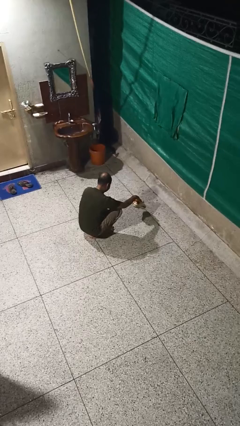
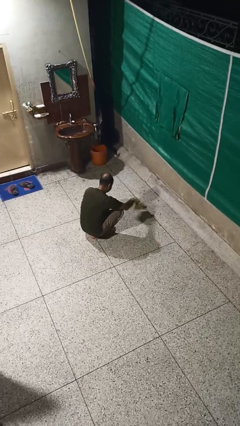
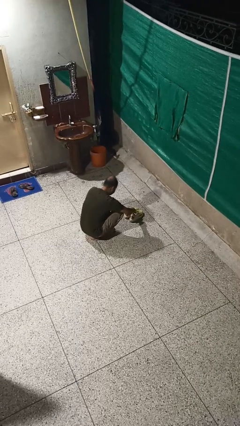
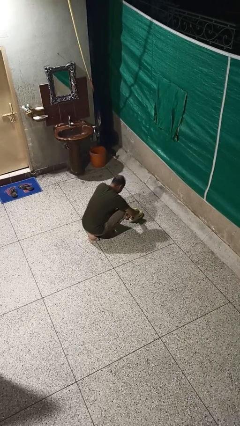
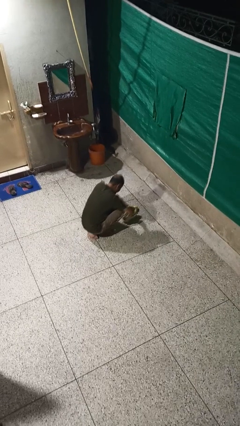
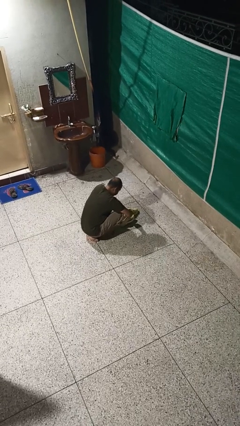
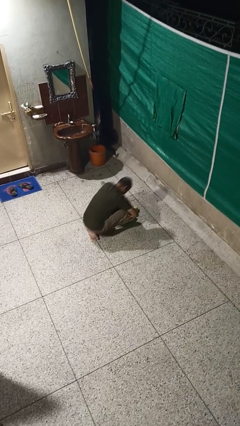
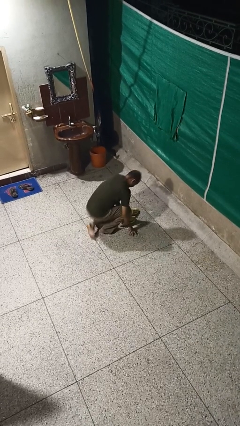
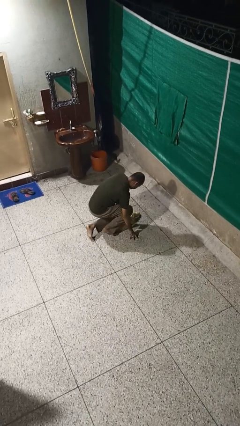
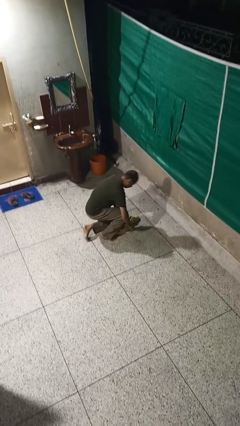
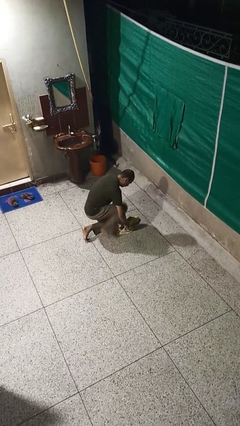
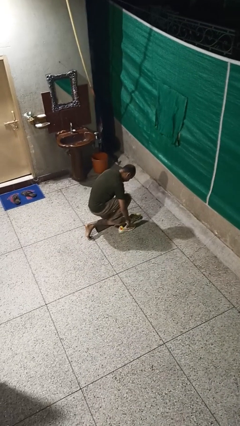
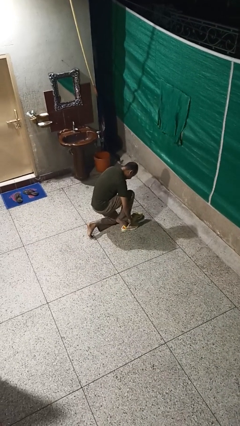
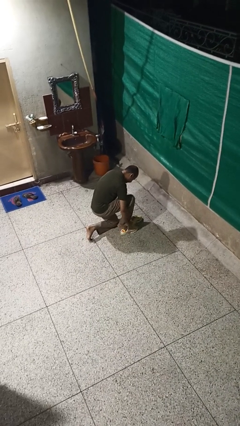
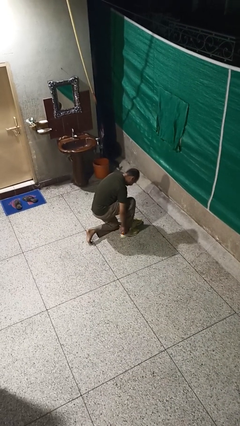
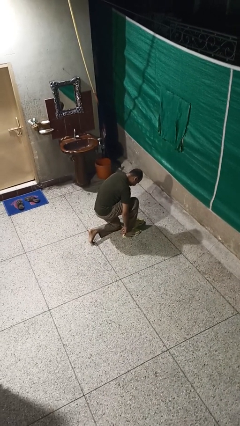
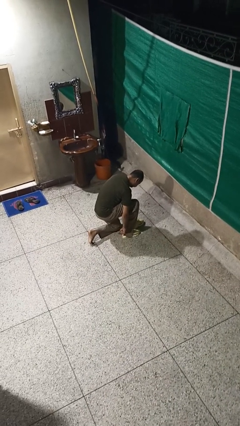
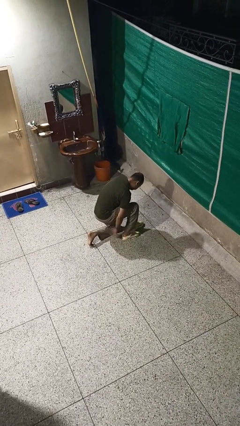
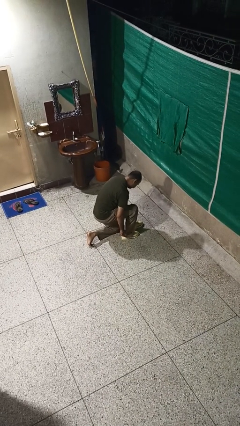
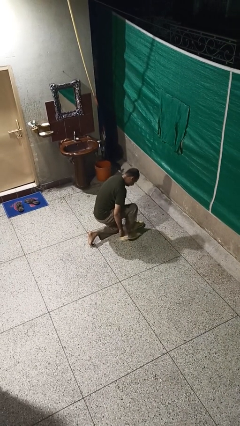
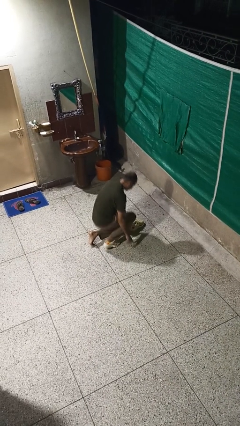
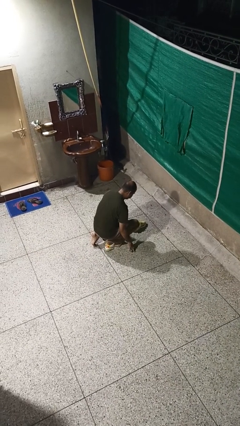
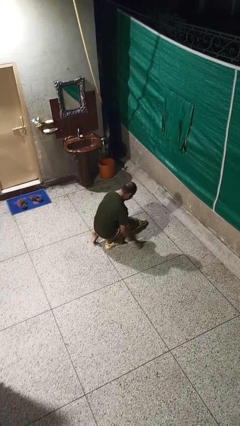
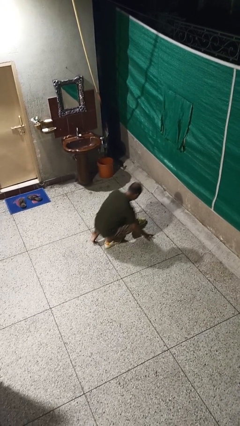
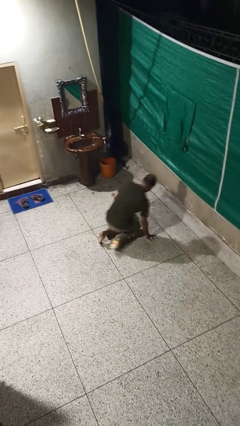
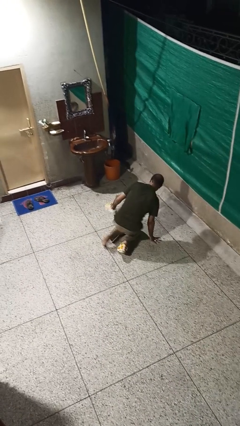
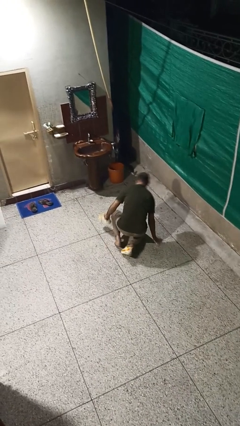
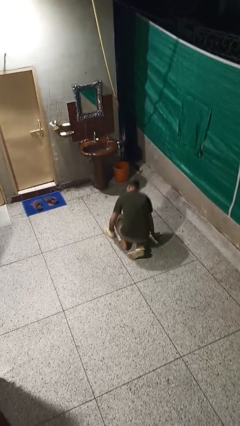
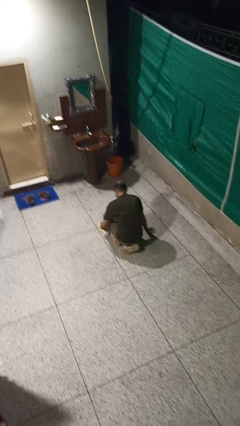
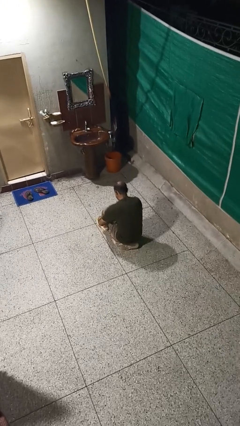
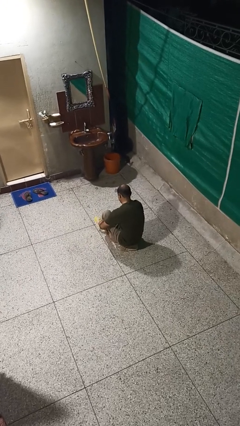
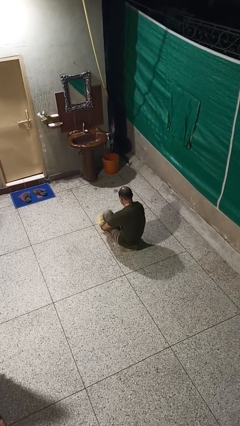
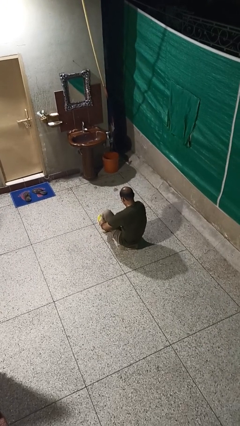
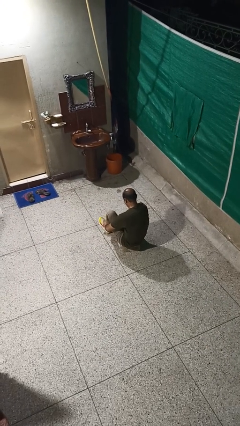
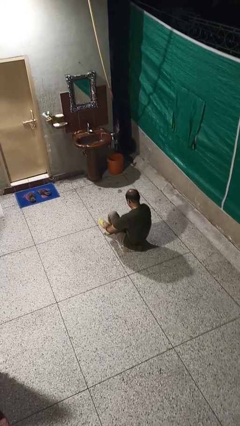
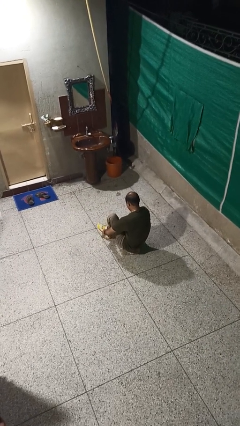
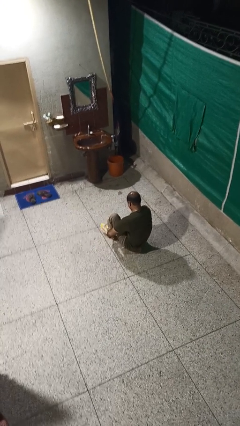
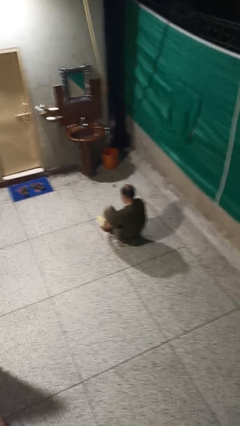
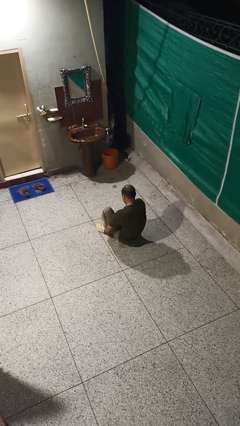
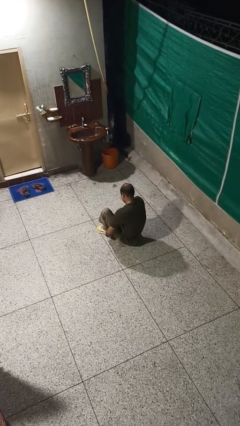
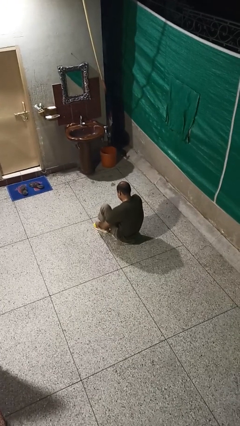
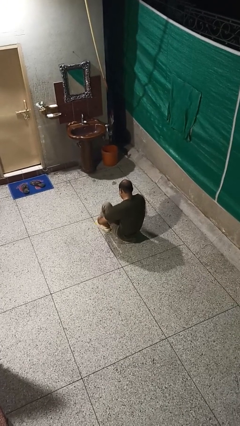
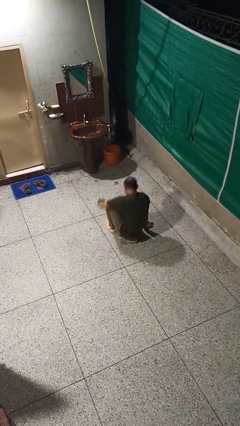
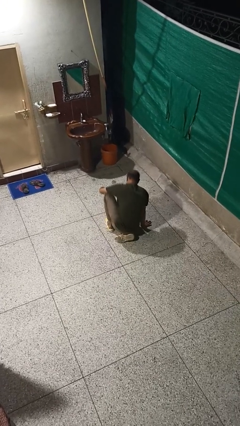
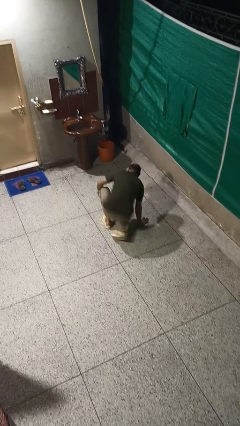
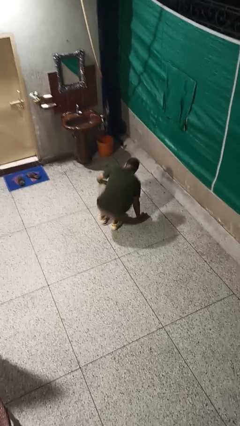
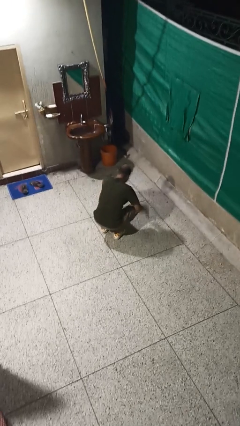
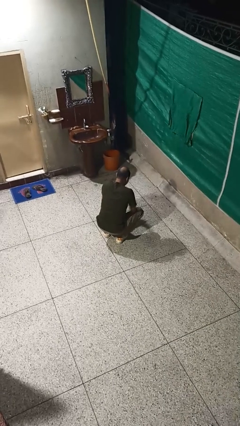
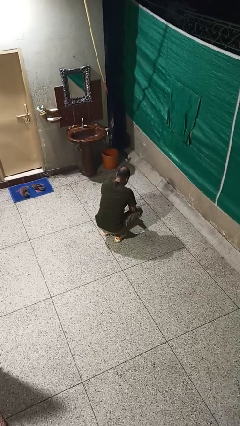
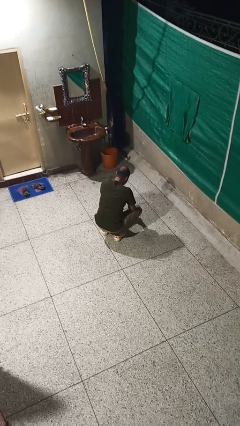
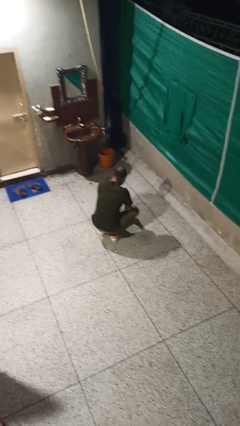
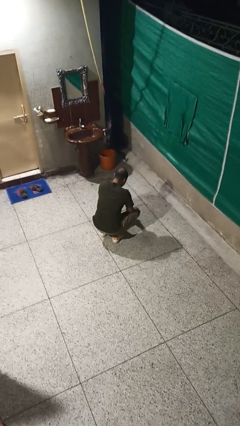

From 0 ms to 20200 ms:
person puts on shoes

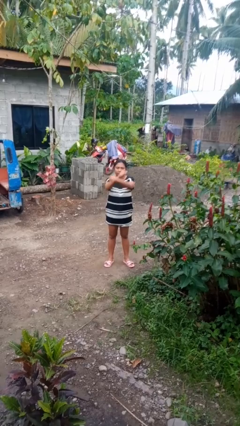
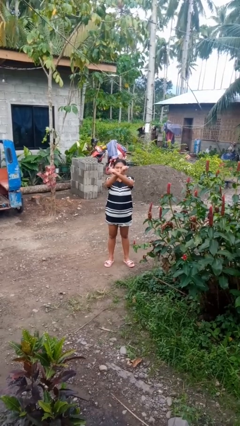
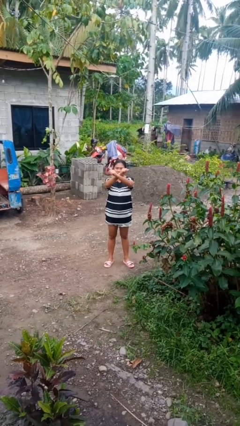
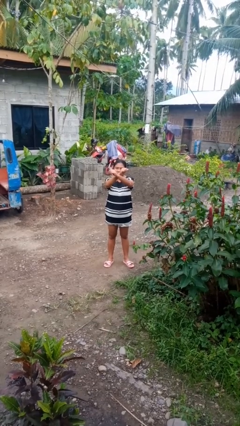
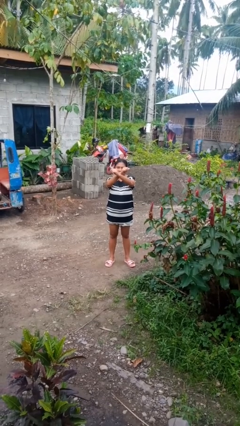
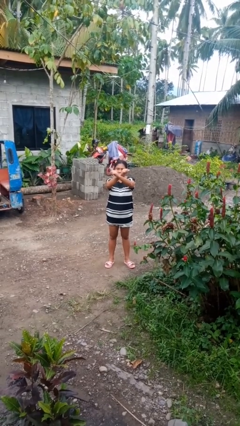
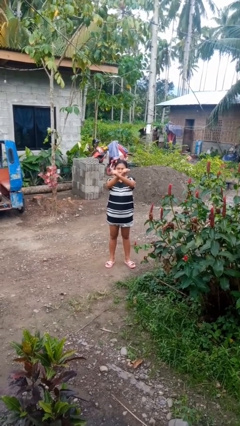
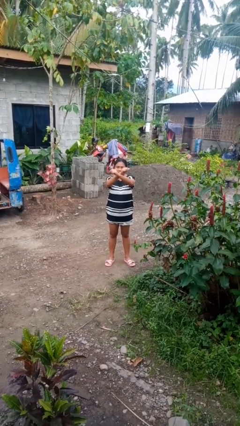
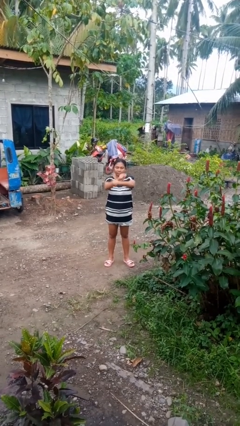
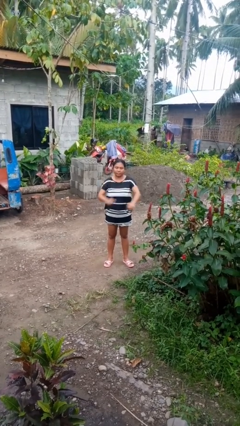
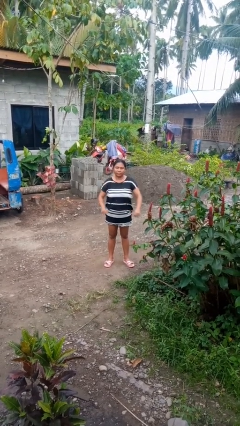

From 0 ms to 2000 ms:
person gestures arms x

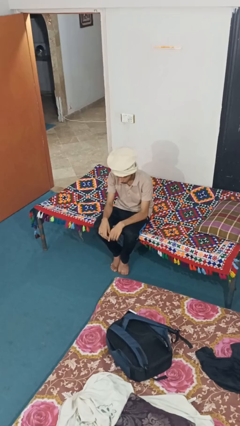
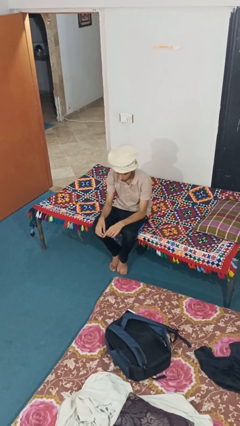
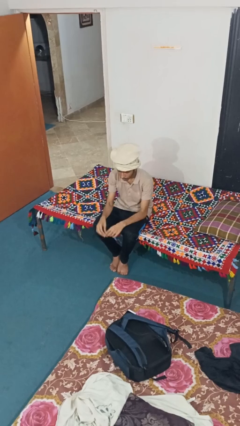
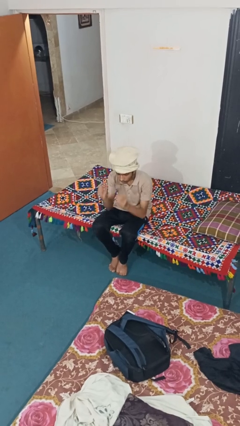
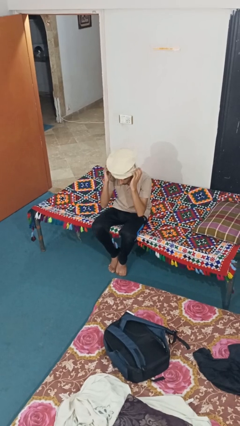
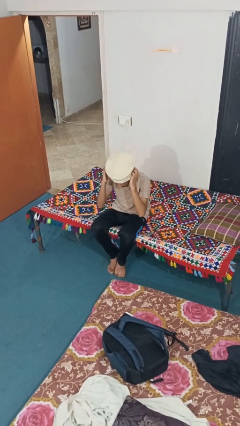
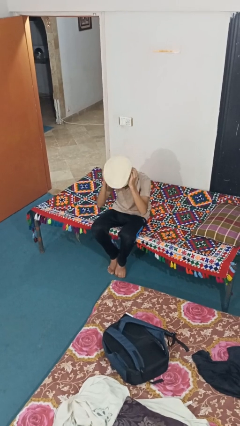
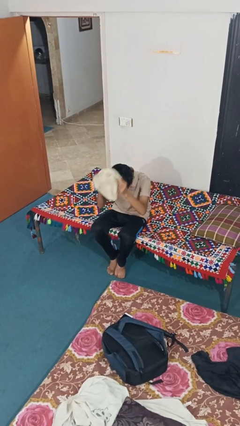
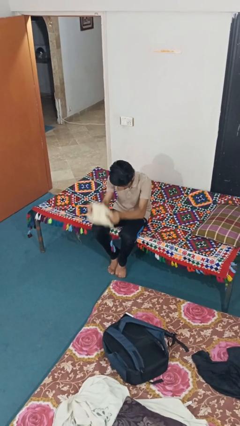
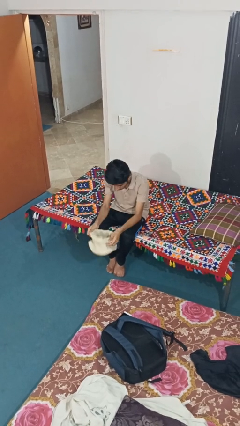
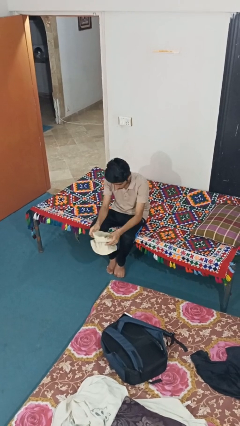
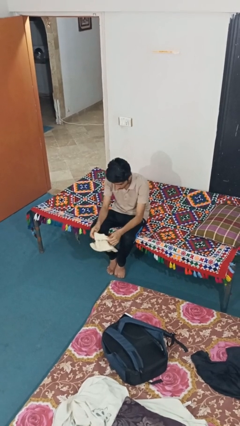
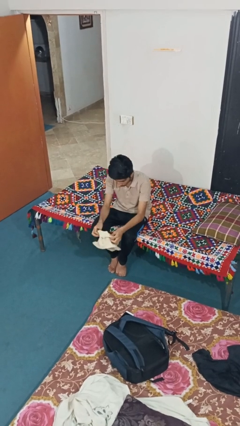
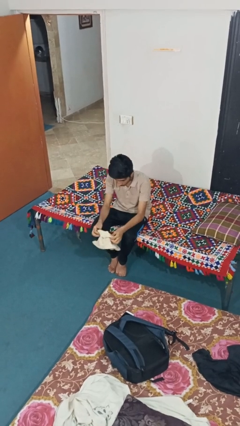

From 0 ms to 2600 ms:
person takes off hat

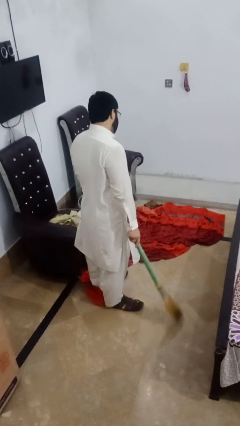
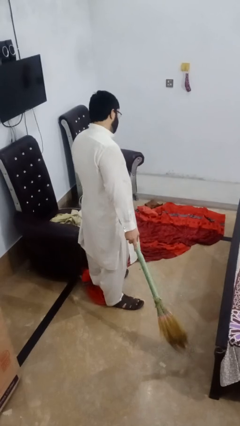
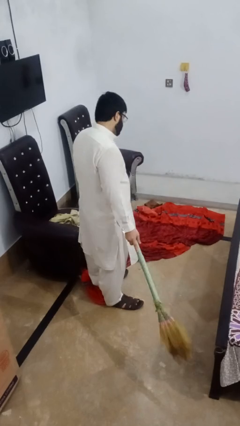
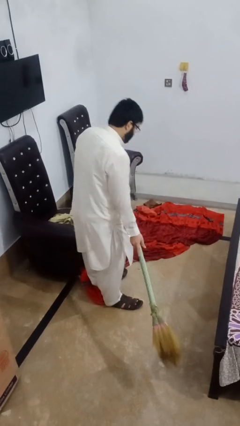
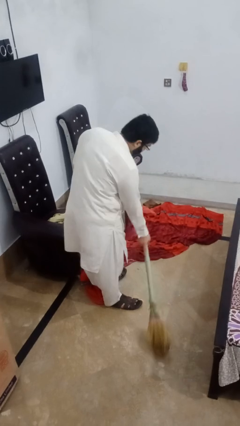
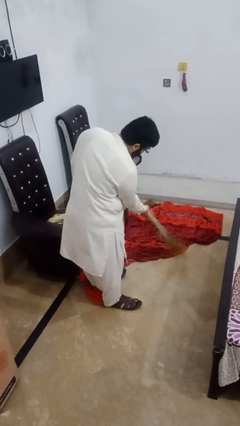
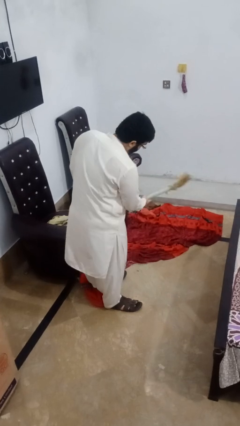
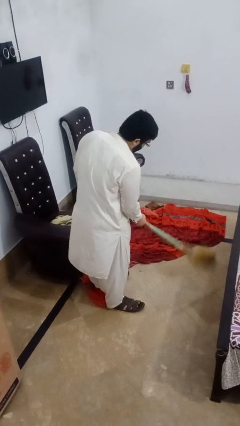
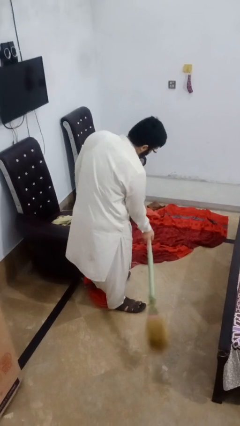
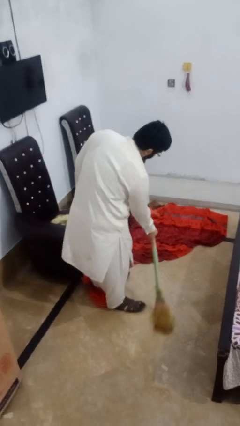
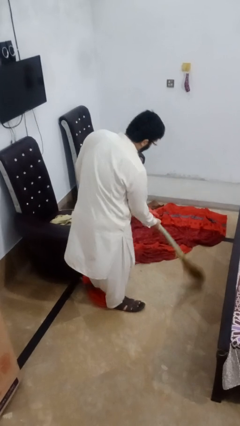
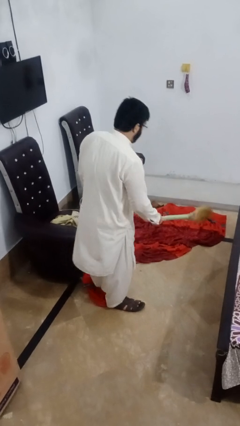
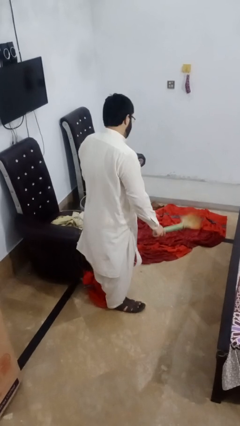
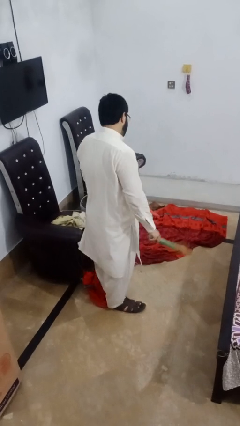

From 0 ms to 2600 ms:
person sweeps floor

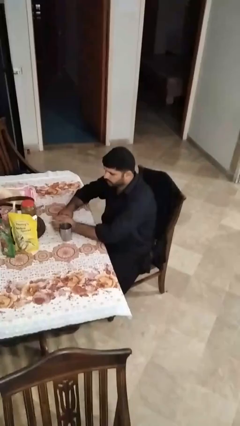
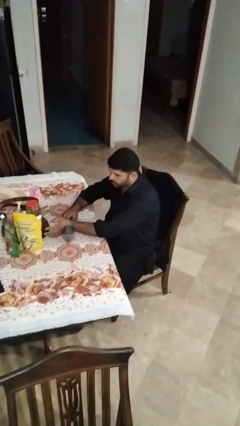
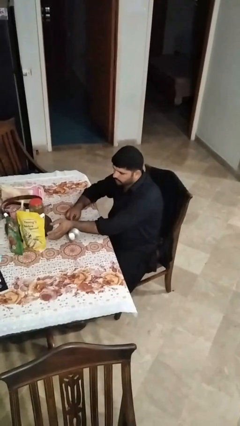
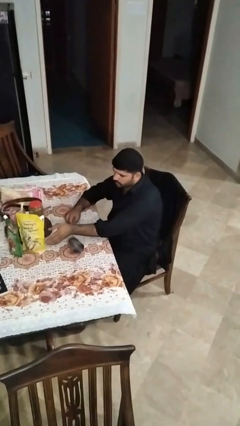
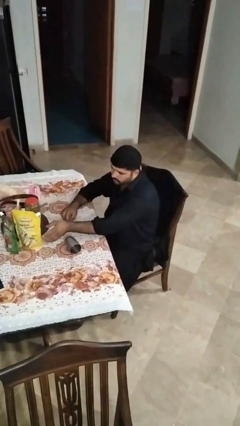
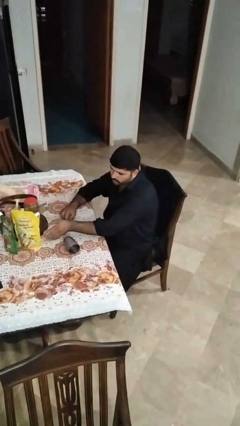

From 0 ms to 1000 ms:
person knocks over glass
